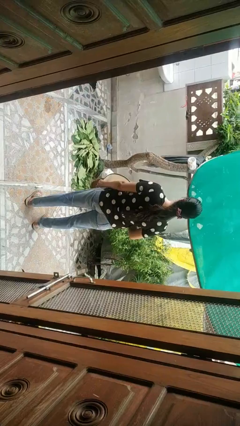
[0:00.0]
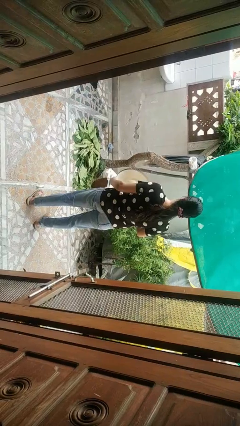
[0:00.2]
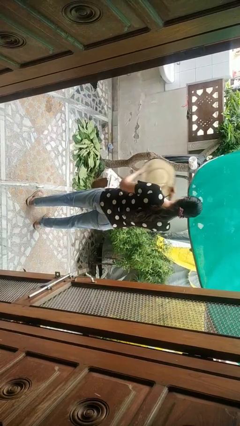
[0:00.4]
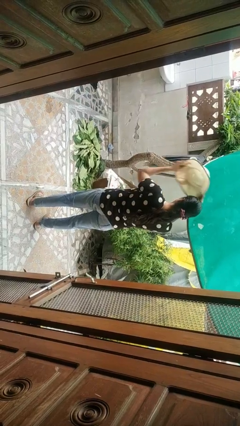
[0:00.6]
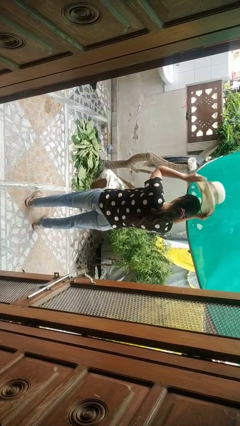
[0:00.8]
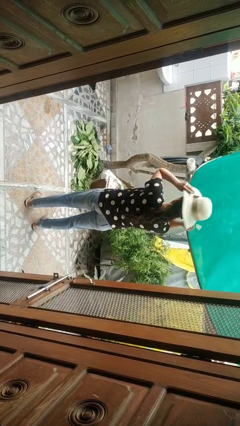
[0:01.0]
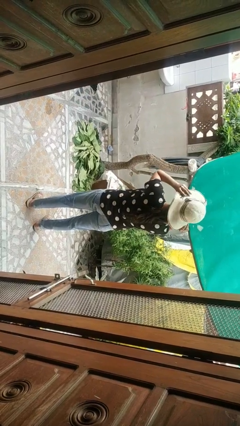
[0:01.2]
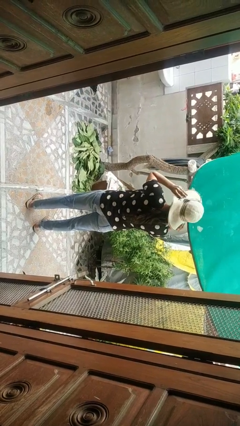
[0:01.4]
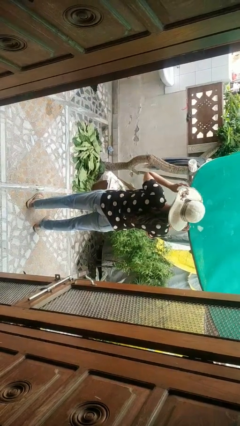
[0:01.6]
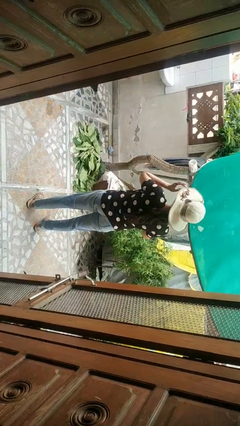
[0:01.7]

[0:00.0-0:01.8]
person puts on hat

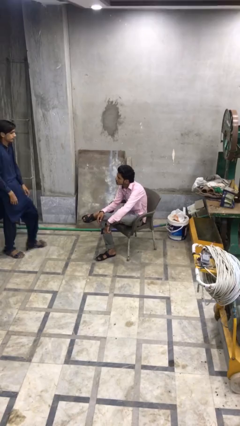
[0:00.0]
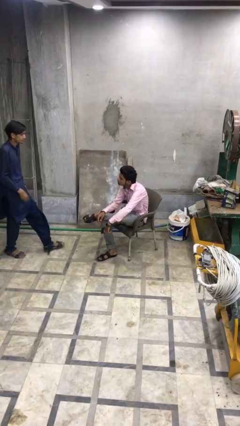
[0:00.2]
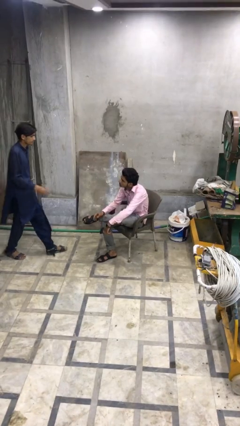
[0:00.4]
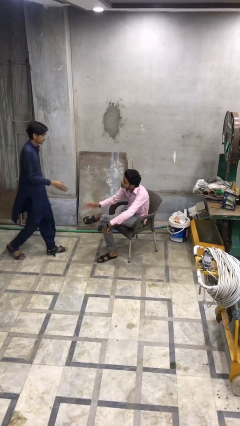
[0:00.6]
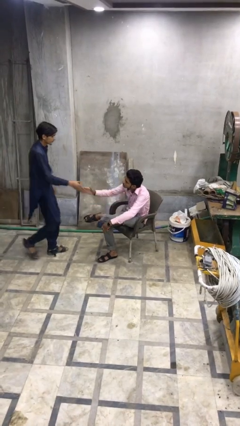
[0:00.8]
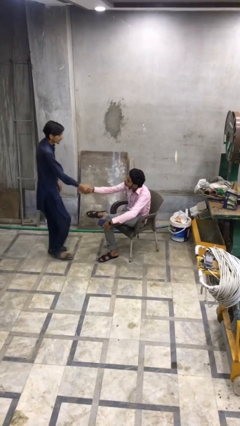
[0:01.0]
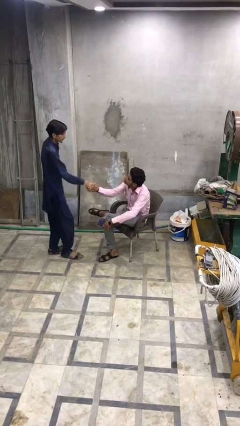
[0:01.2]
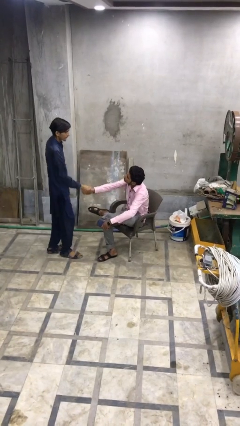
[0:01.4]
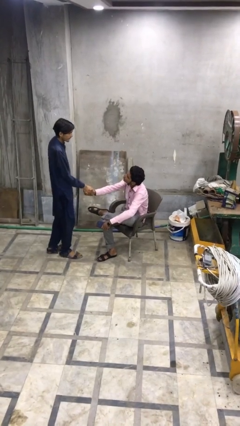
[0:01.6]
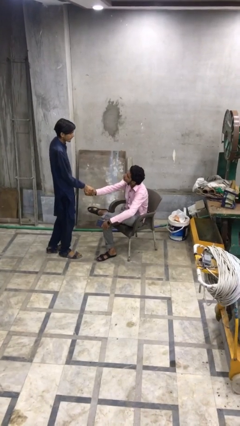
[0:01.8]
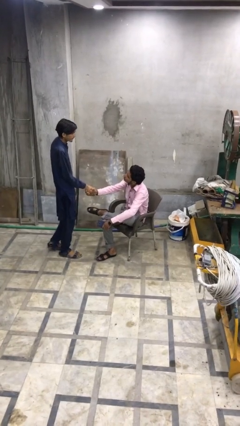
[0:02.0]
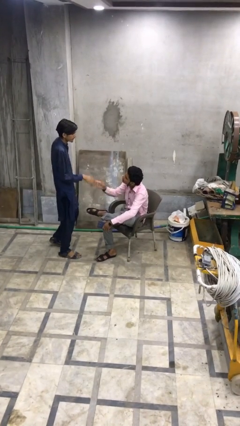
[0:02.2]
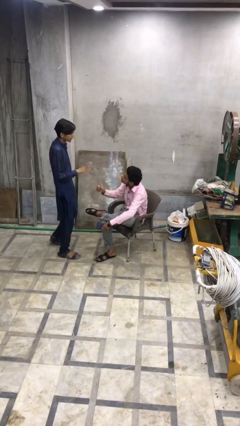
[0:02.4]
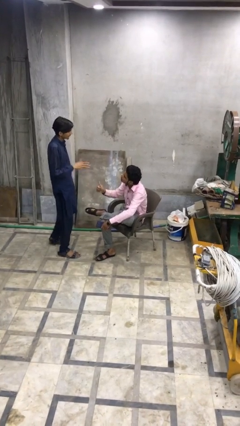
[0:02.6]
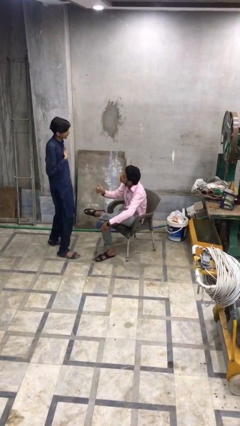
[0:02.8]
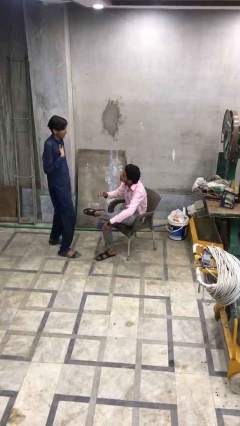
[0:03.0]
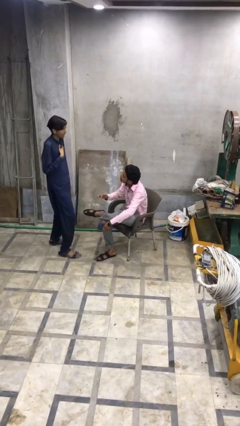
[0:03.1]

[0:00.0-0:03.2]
person shakes hand

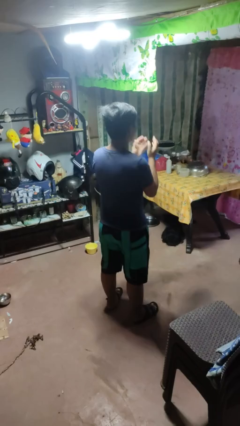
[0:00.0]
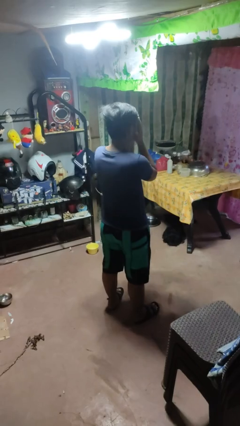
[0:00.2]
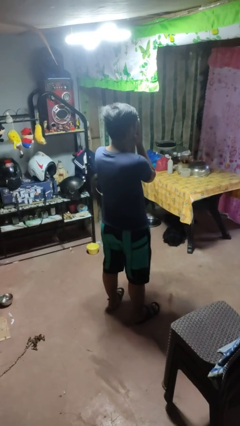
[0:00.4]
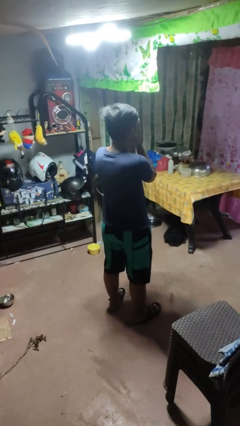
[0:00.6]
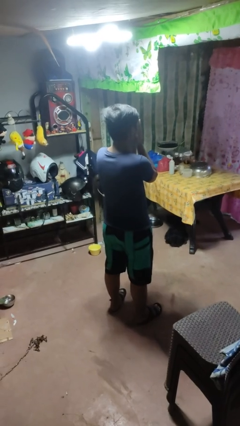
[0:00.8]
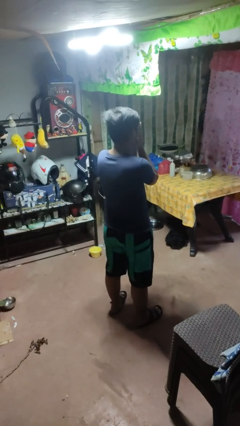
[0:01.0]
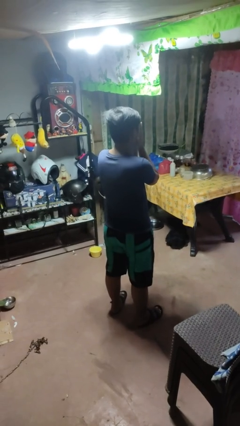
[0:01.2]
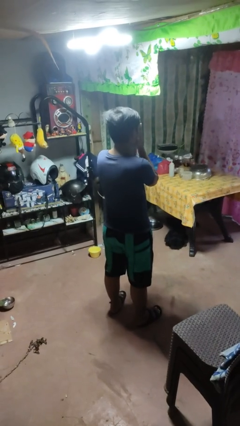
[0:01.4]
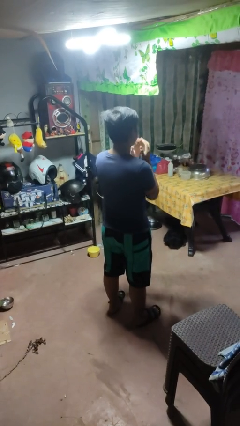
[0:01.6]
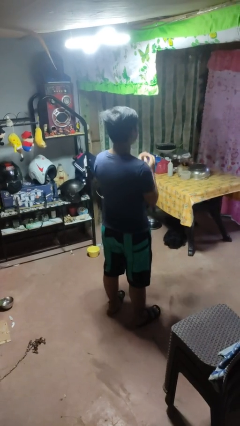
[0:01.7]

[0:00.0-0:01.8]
person covers face with hands

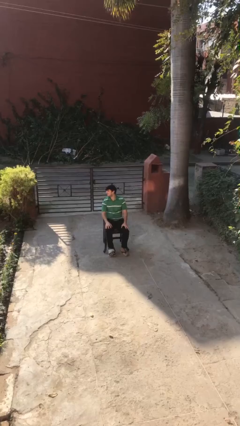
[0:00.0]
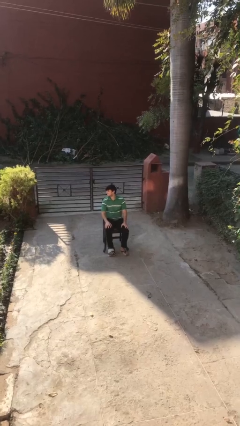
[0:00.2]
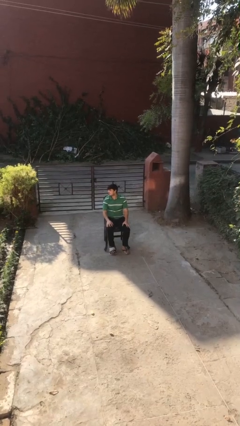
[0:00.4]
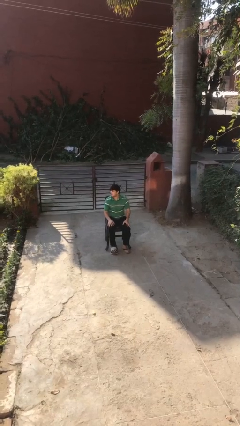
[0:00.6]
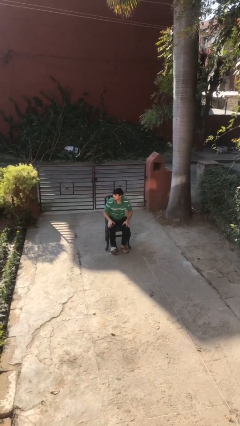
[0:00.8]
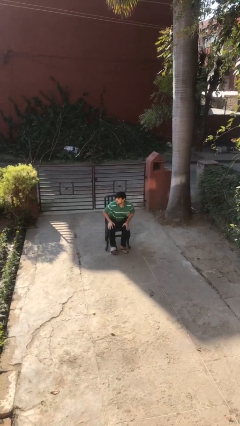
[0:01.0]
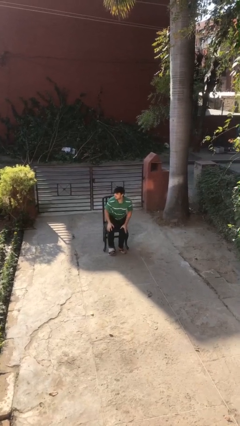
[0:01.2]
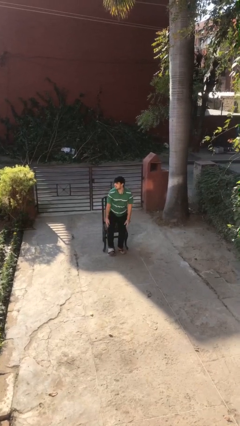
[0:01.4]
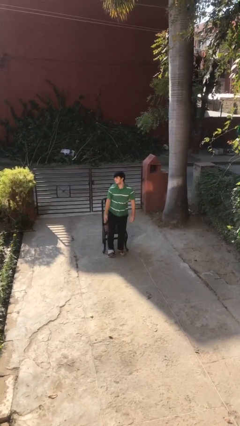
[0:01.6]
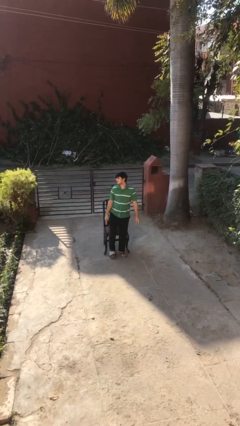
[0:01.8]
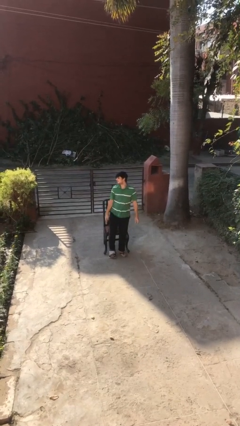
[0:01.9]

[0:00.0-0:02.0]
person stands up

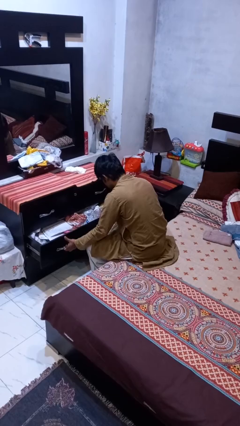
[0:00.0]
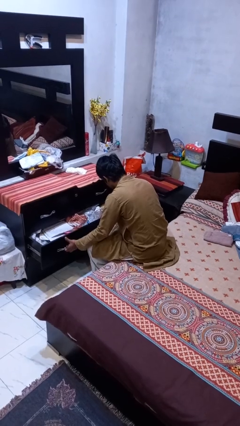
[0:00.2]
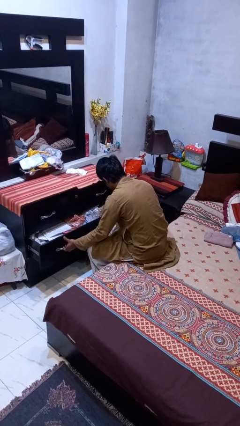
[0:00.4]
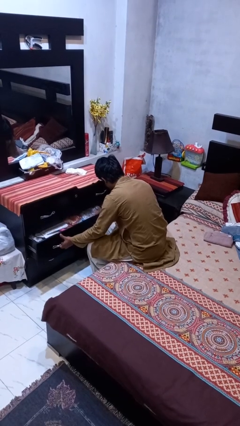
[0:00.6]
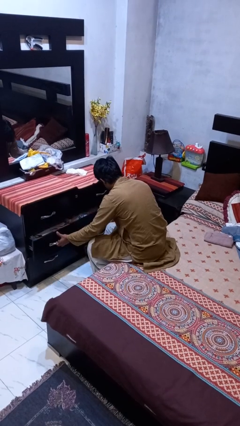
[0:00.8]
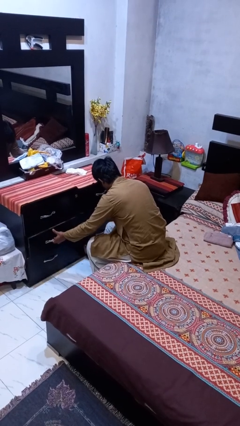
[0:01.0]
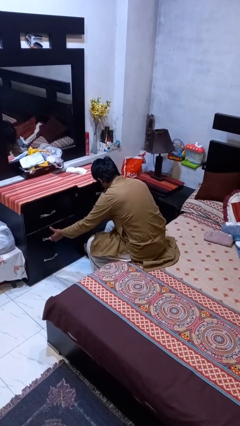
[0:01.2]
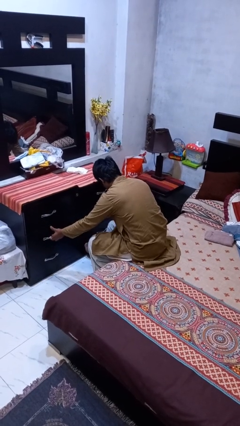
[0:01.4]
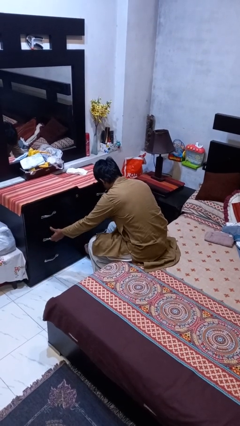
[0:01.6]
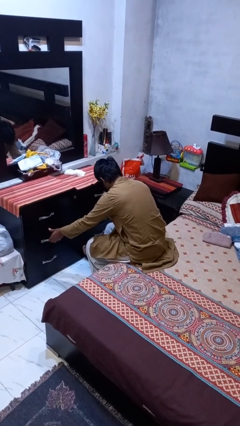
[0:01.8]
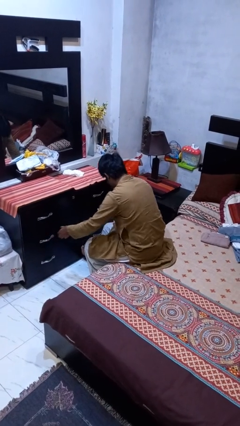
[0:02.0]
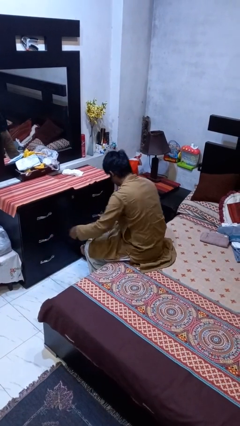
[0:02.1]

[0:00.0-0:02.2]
person closes dresser drawer

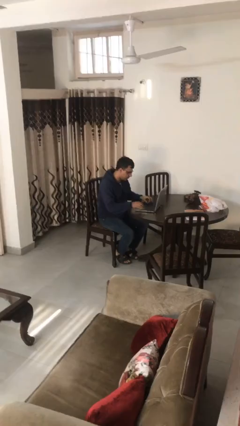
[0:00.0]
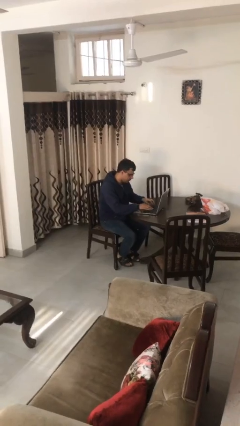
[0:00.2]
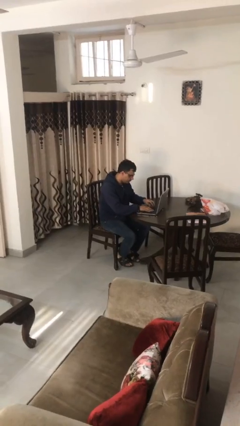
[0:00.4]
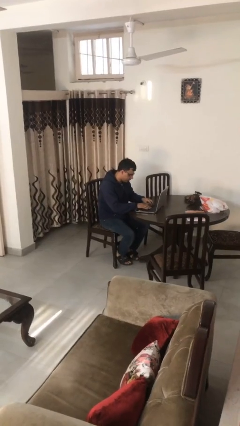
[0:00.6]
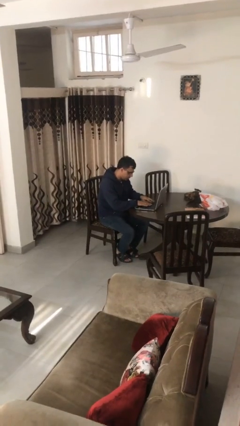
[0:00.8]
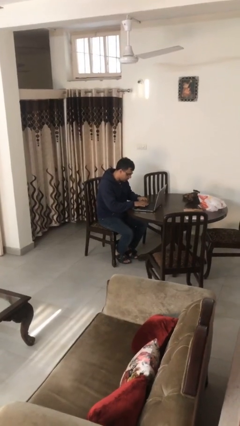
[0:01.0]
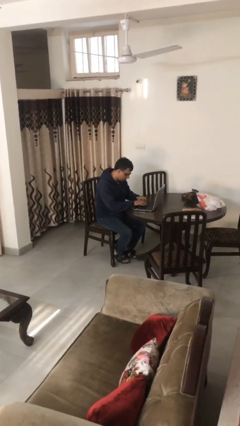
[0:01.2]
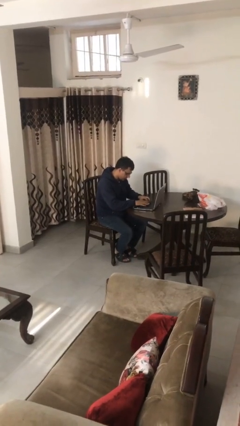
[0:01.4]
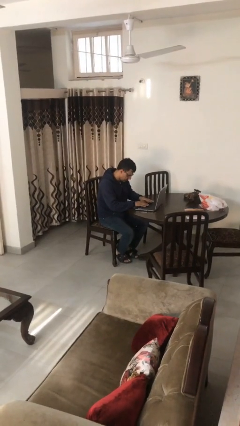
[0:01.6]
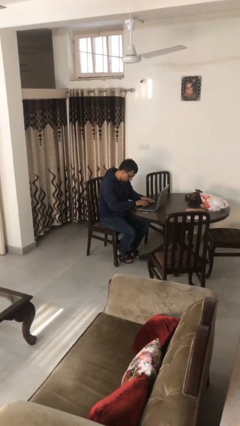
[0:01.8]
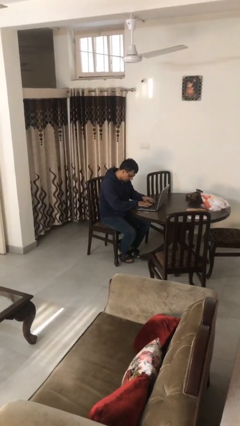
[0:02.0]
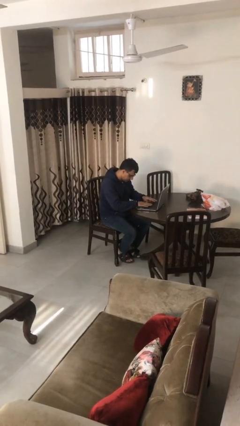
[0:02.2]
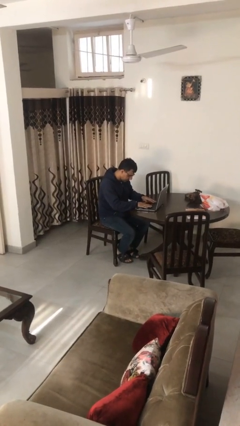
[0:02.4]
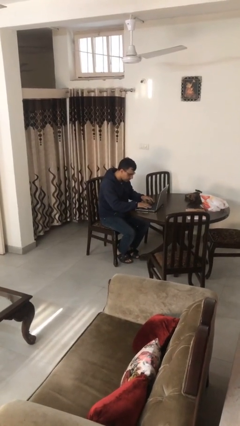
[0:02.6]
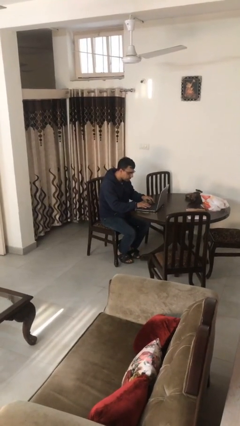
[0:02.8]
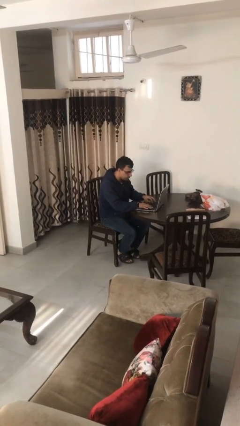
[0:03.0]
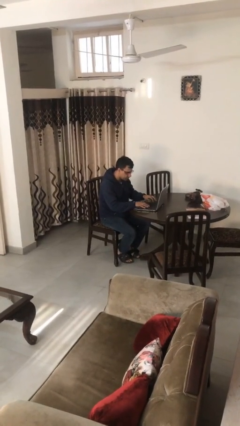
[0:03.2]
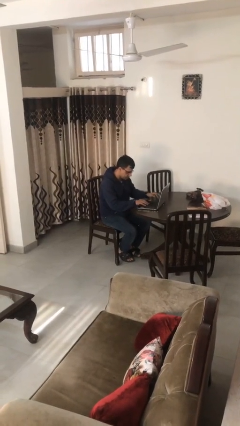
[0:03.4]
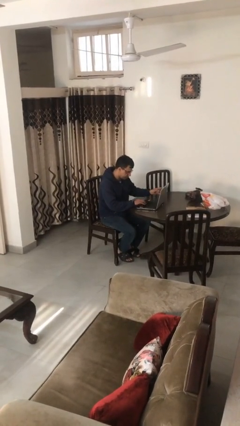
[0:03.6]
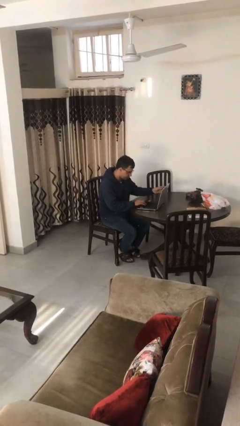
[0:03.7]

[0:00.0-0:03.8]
person interacts with laptop

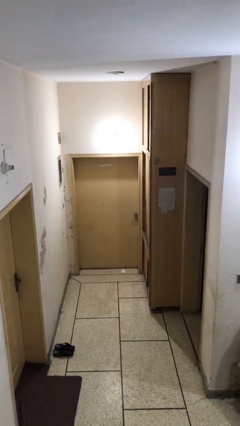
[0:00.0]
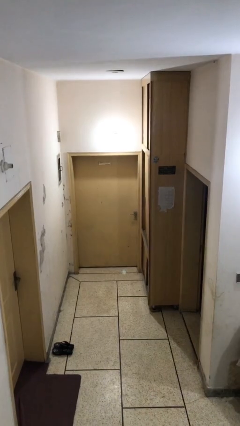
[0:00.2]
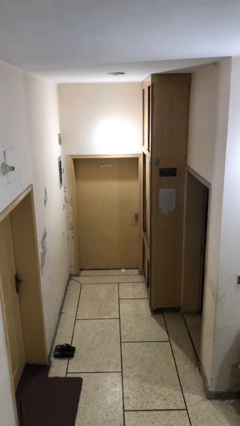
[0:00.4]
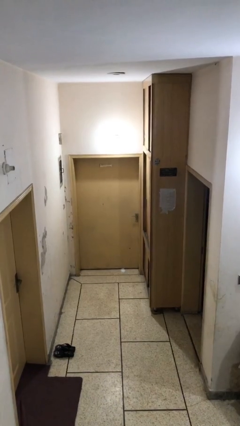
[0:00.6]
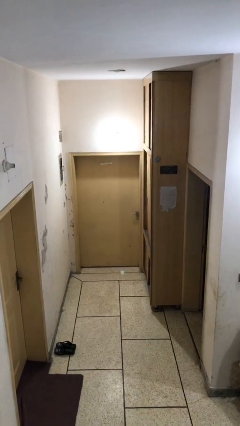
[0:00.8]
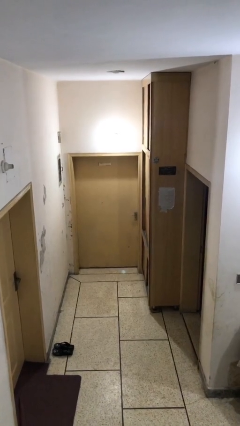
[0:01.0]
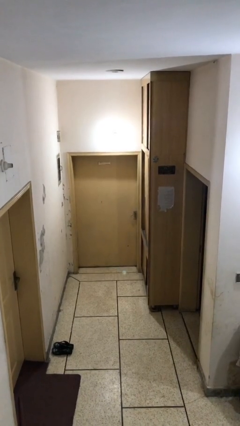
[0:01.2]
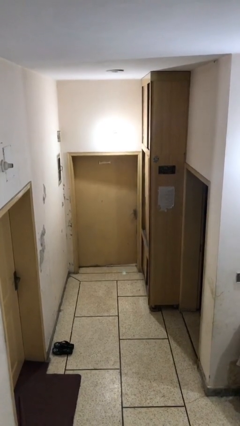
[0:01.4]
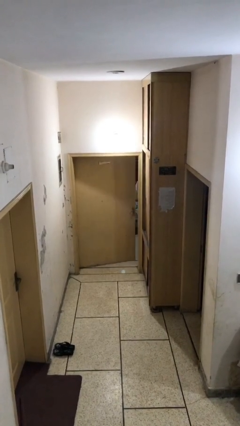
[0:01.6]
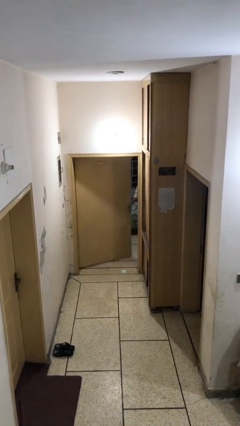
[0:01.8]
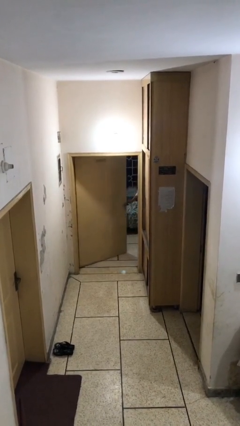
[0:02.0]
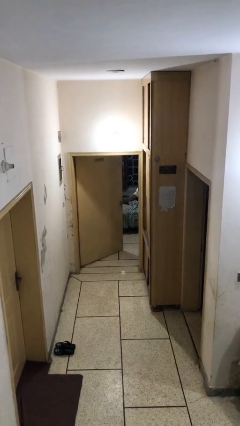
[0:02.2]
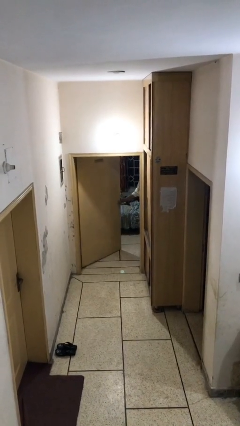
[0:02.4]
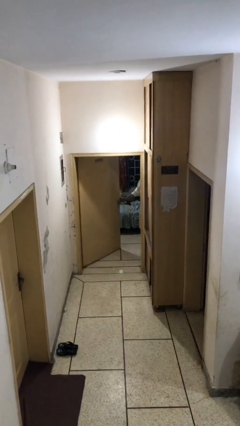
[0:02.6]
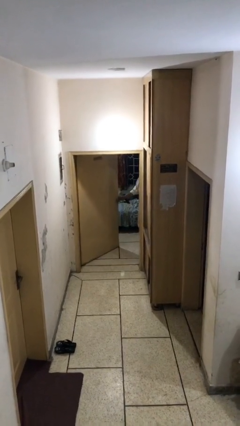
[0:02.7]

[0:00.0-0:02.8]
person opens facility door
